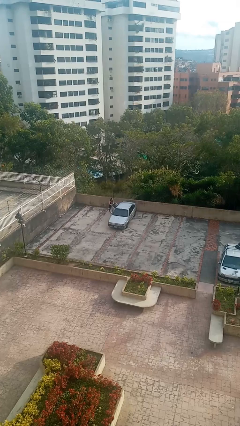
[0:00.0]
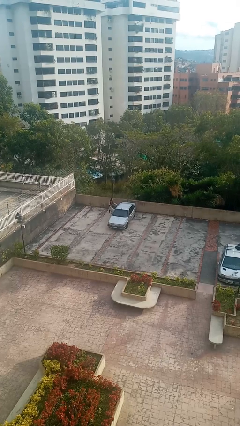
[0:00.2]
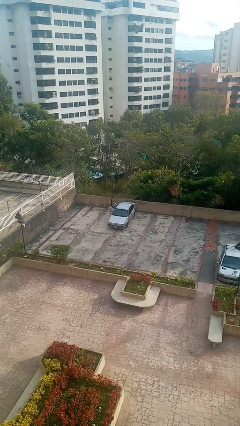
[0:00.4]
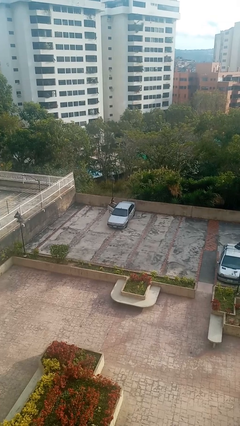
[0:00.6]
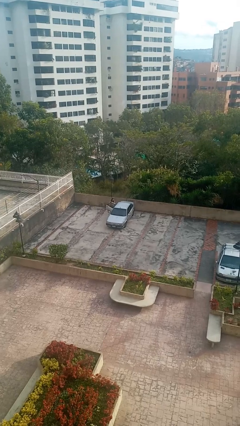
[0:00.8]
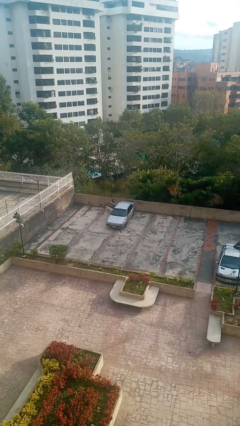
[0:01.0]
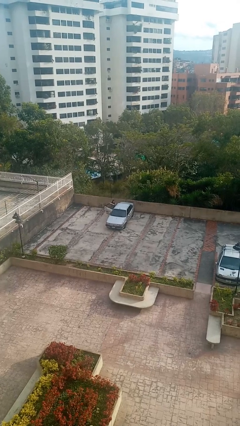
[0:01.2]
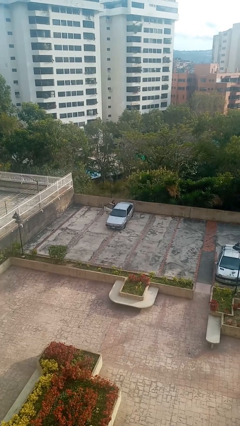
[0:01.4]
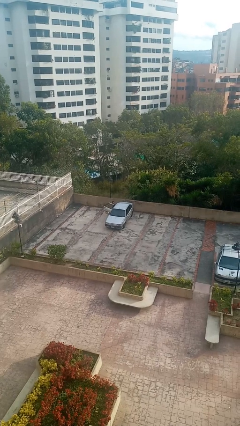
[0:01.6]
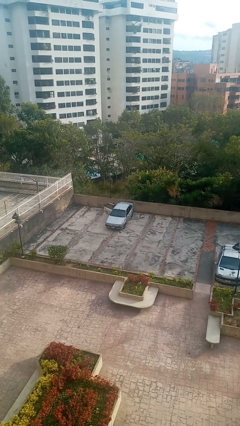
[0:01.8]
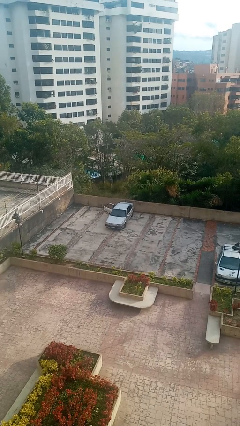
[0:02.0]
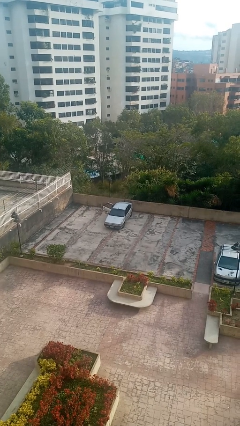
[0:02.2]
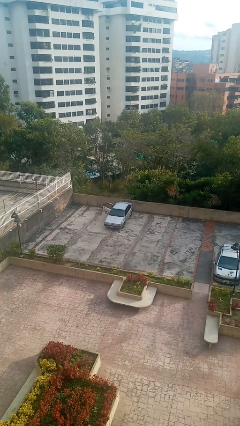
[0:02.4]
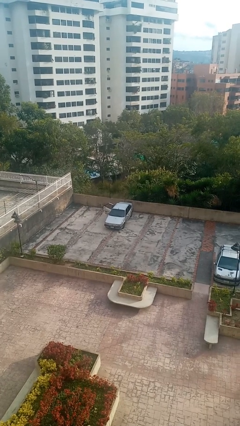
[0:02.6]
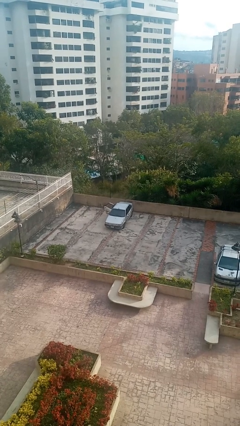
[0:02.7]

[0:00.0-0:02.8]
car picks up person

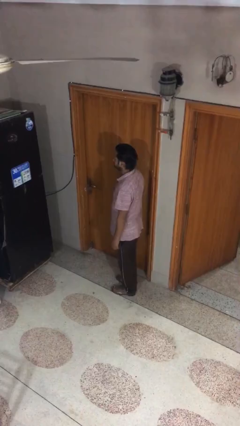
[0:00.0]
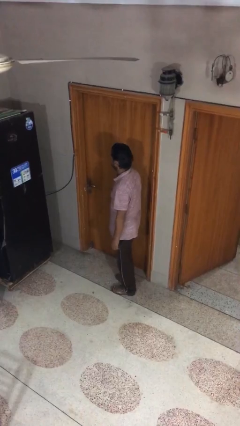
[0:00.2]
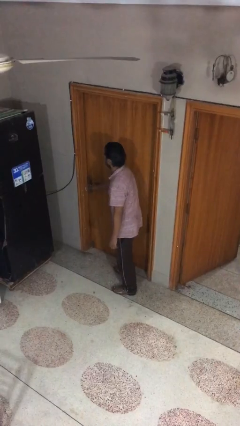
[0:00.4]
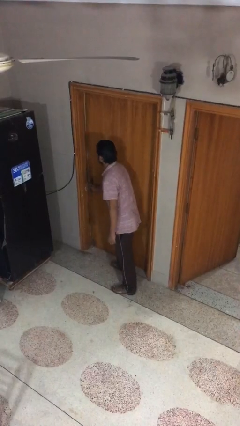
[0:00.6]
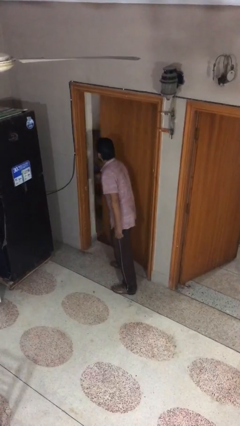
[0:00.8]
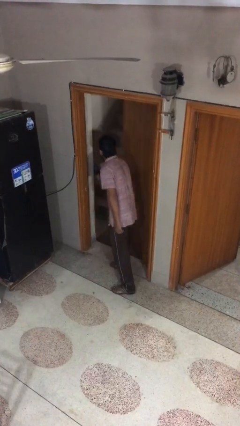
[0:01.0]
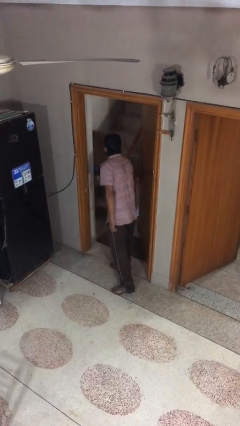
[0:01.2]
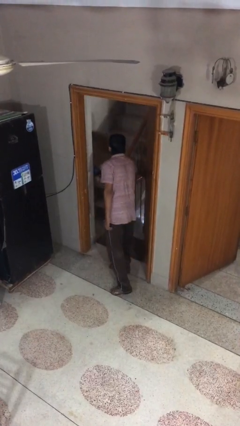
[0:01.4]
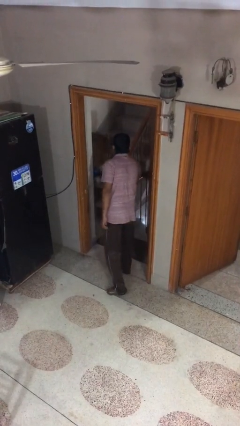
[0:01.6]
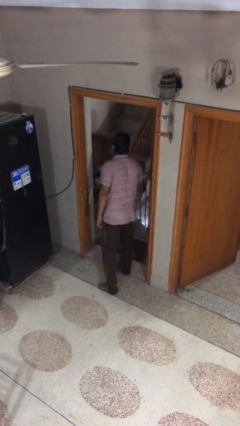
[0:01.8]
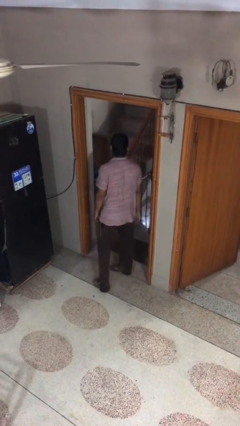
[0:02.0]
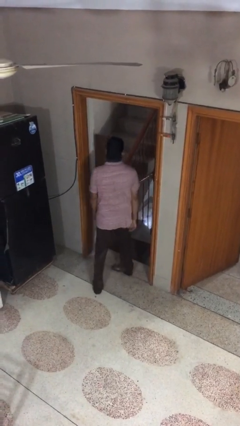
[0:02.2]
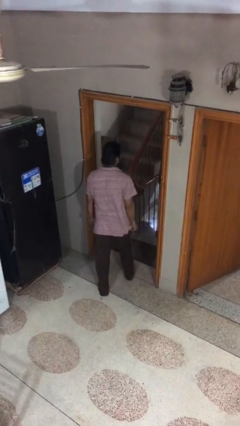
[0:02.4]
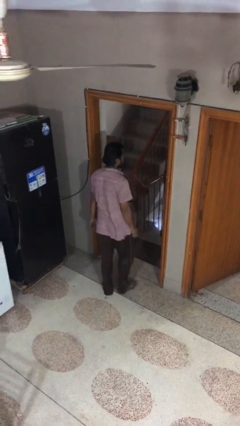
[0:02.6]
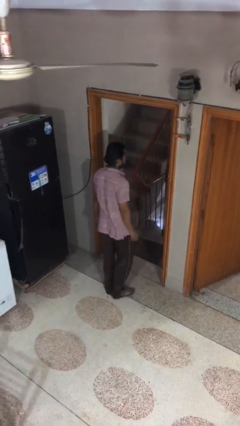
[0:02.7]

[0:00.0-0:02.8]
person opens facility door

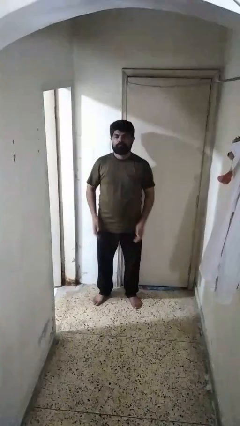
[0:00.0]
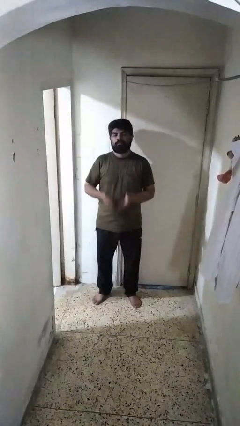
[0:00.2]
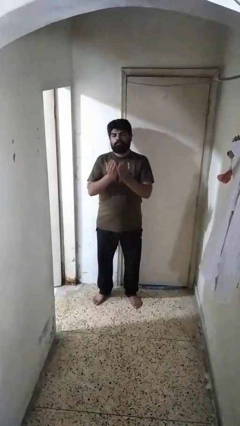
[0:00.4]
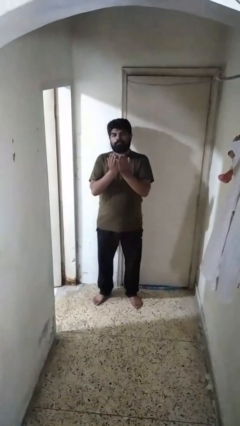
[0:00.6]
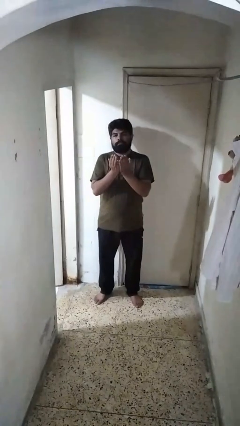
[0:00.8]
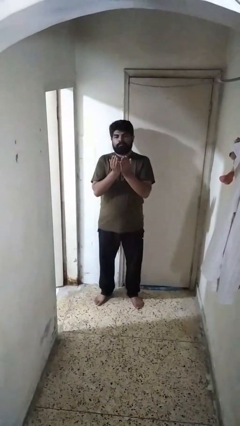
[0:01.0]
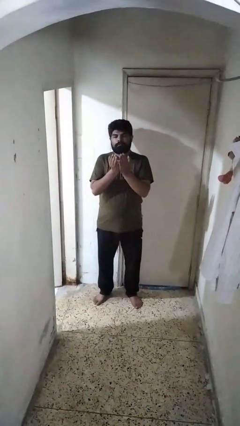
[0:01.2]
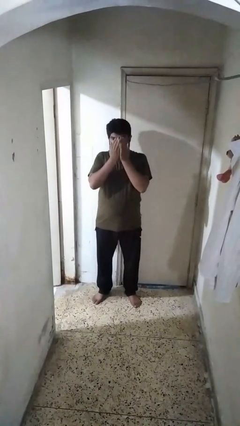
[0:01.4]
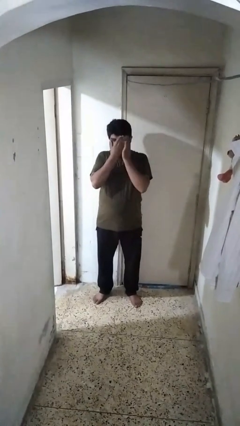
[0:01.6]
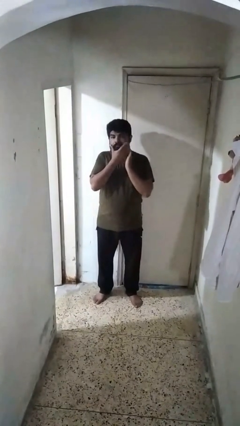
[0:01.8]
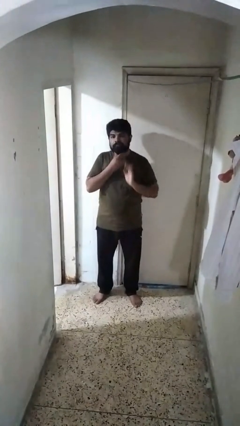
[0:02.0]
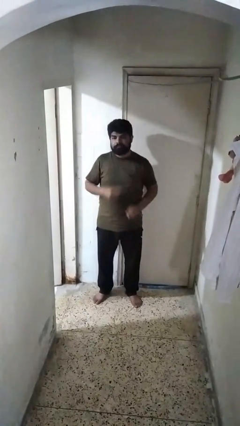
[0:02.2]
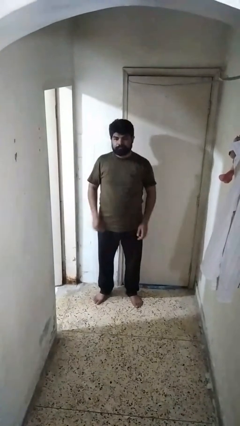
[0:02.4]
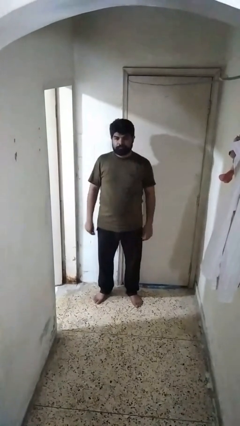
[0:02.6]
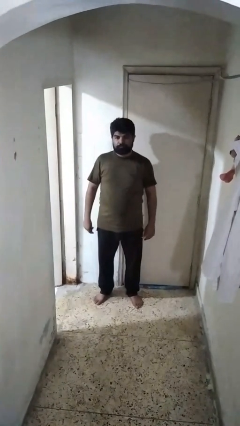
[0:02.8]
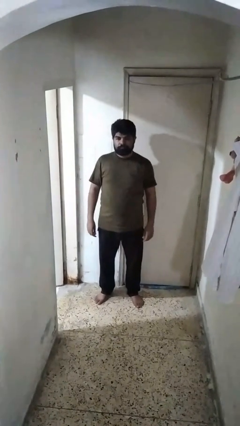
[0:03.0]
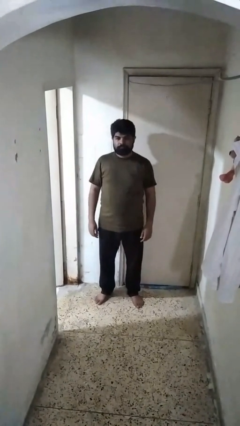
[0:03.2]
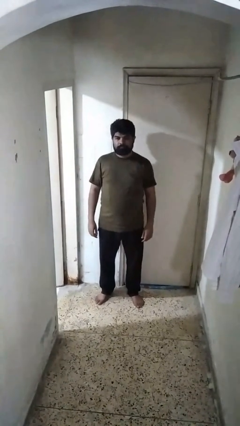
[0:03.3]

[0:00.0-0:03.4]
person prays

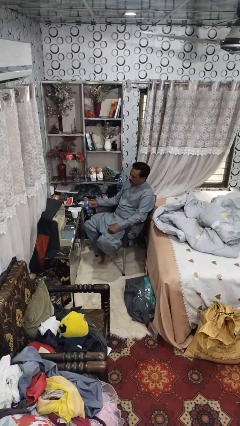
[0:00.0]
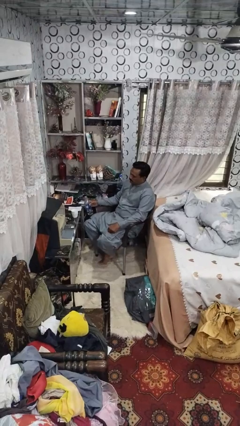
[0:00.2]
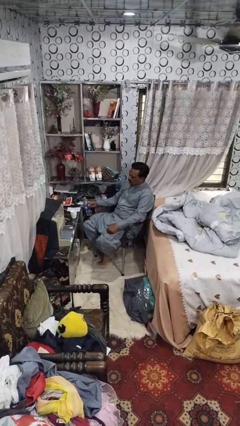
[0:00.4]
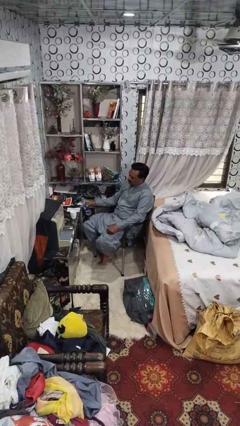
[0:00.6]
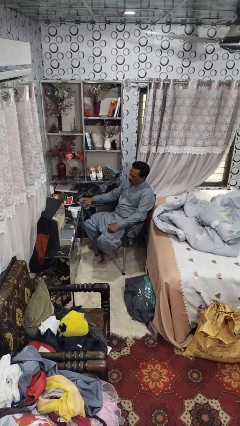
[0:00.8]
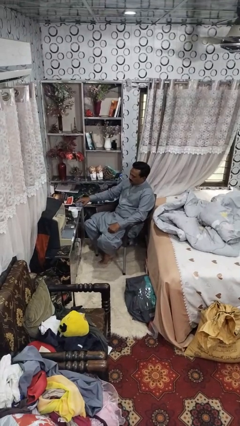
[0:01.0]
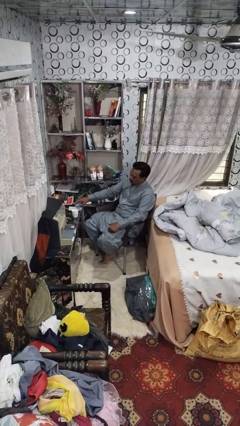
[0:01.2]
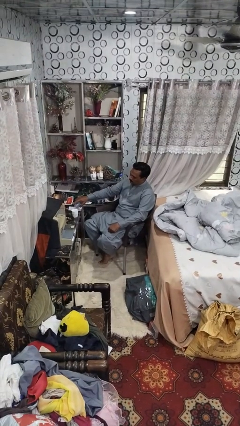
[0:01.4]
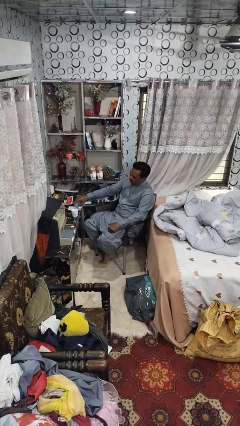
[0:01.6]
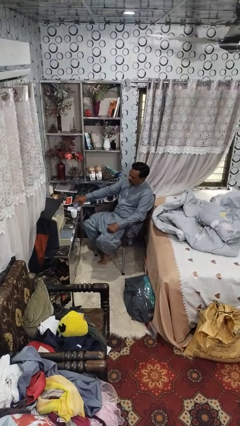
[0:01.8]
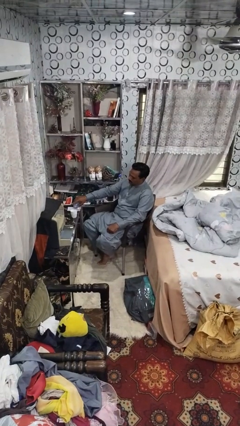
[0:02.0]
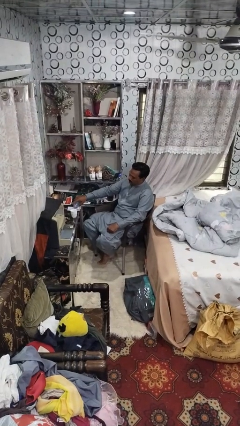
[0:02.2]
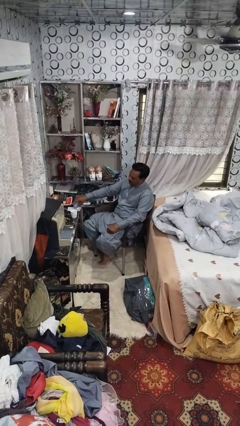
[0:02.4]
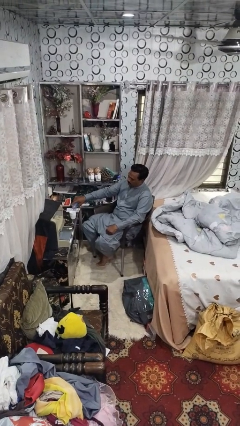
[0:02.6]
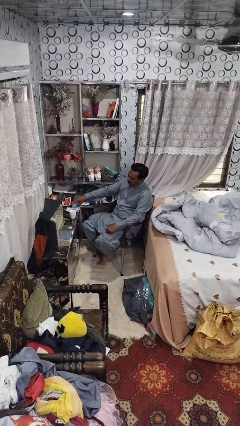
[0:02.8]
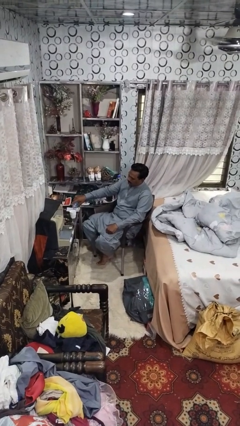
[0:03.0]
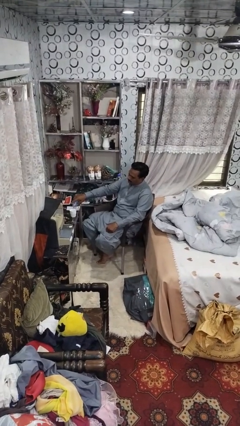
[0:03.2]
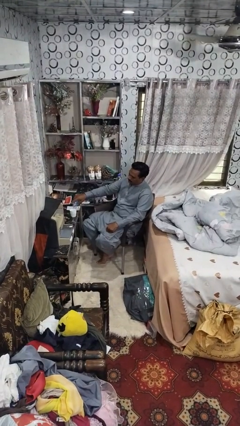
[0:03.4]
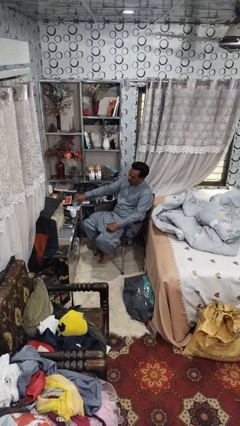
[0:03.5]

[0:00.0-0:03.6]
person pours liquid into cup

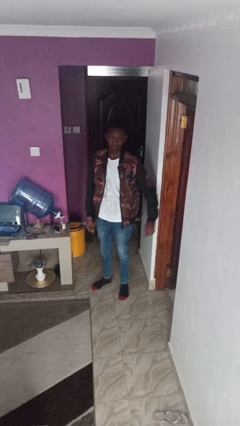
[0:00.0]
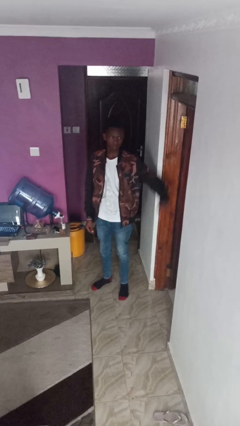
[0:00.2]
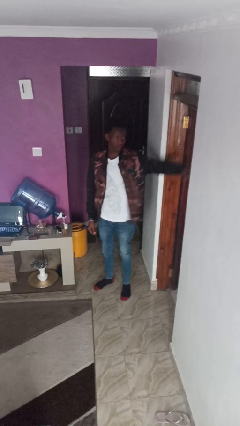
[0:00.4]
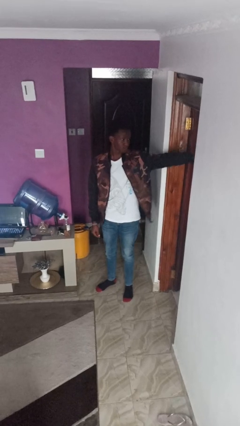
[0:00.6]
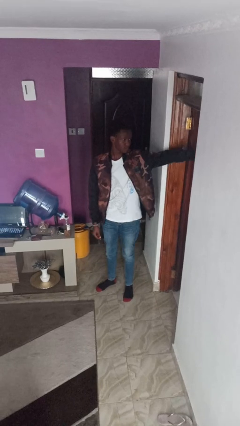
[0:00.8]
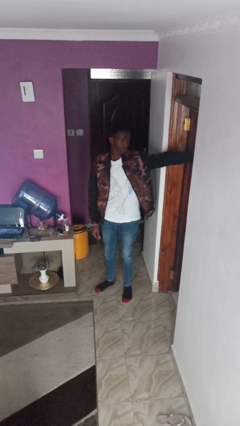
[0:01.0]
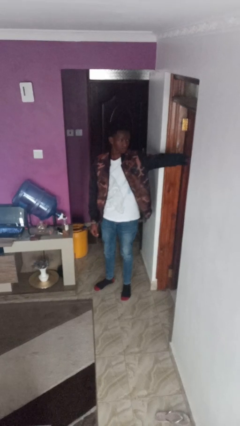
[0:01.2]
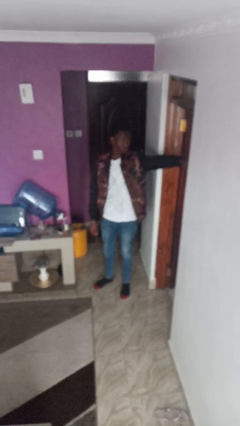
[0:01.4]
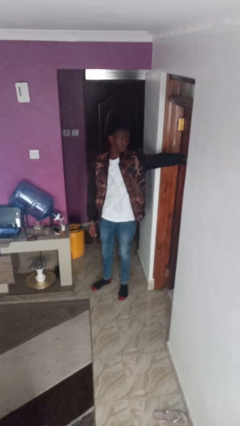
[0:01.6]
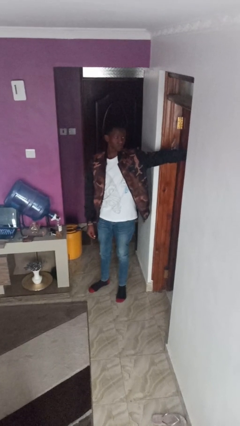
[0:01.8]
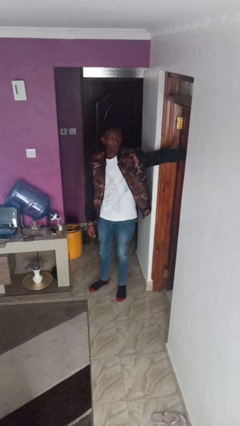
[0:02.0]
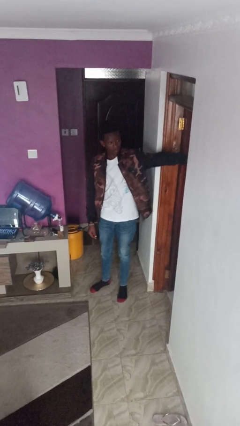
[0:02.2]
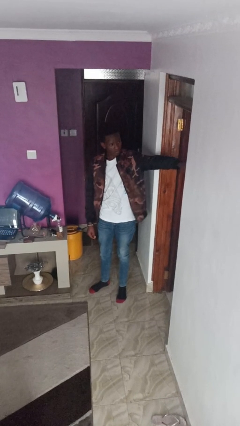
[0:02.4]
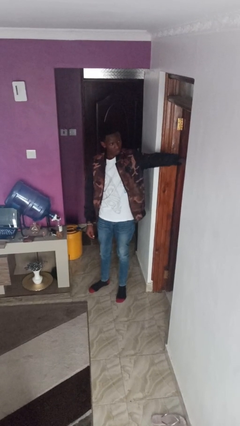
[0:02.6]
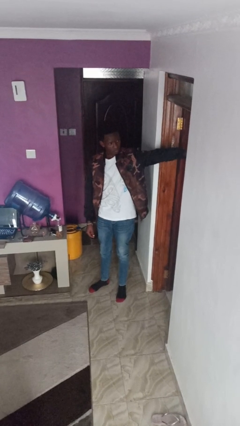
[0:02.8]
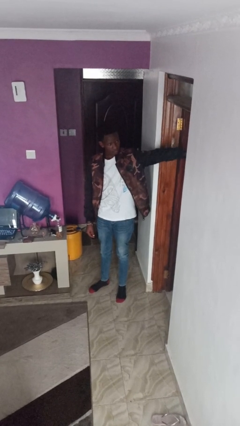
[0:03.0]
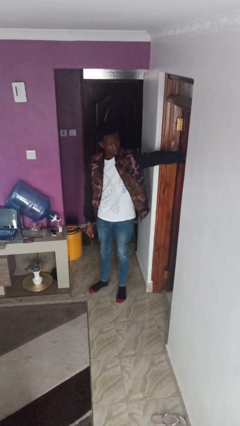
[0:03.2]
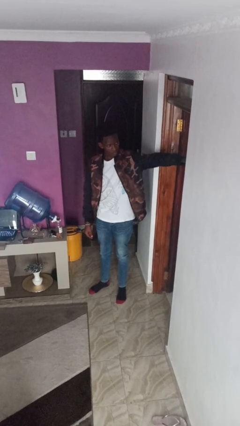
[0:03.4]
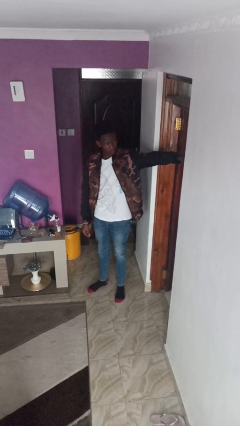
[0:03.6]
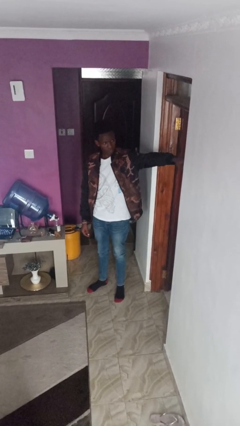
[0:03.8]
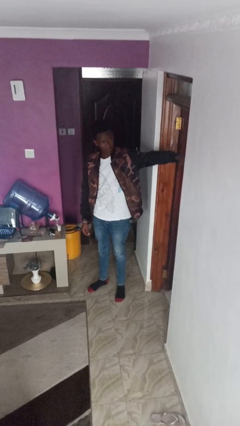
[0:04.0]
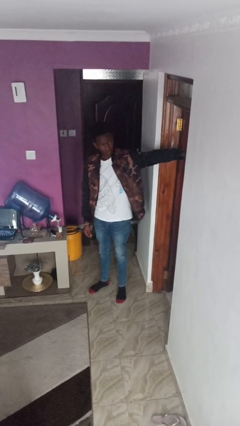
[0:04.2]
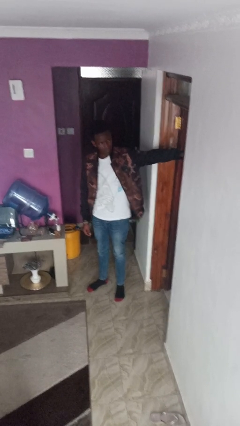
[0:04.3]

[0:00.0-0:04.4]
person points at person
